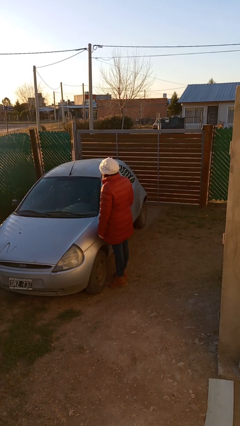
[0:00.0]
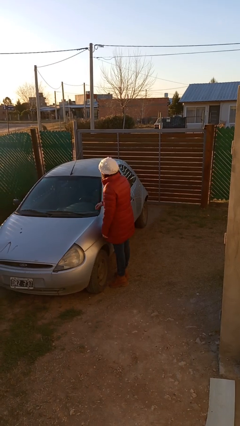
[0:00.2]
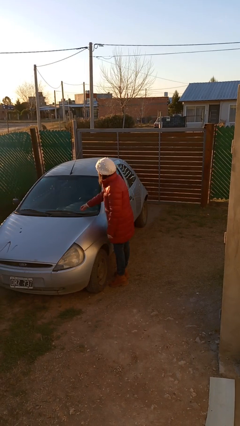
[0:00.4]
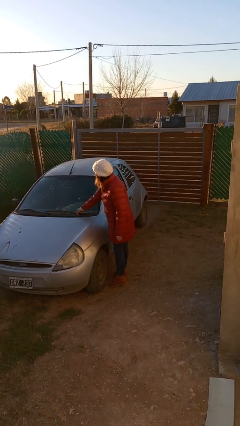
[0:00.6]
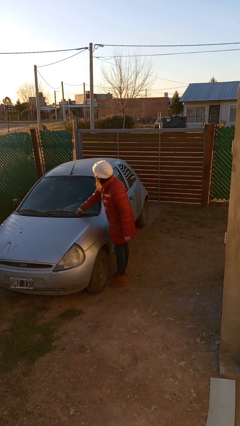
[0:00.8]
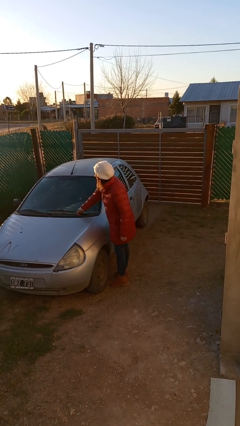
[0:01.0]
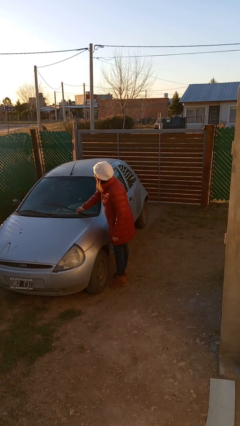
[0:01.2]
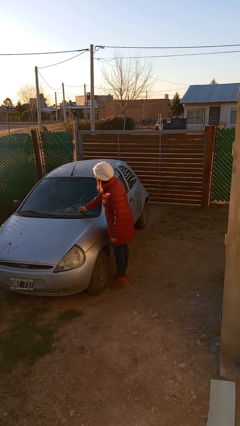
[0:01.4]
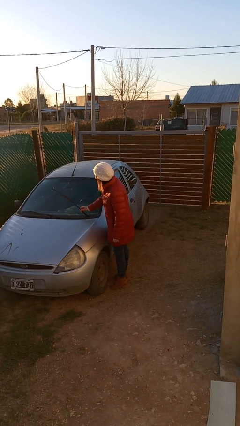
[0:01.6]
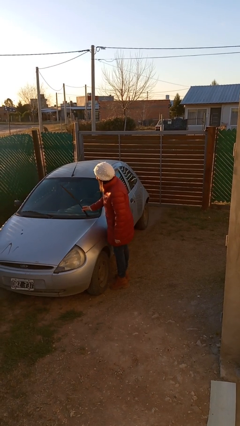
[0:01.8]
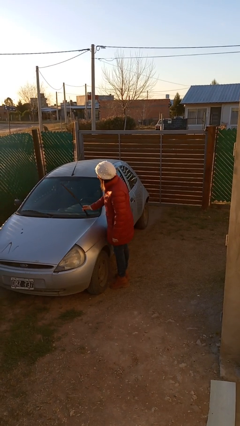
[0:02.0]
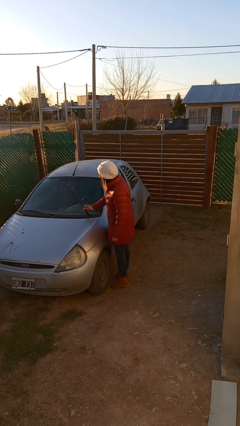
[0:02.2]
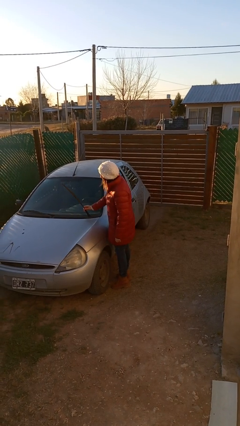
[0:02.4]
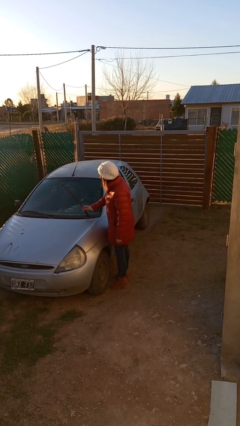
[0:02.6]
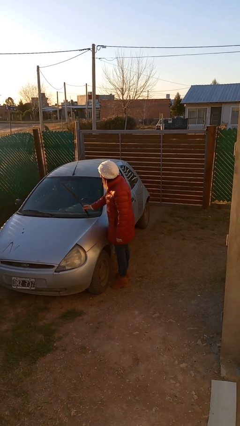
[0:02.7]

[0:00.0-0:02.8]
person flips up car wipers

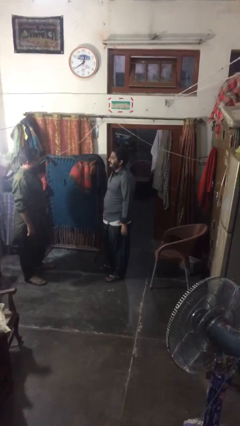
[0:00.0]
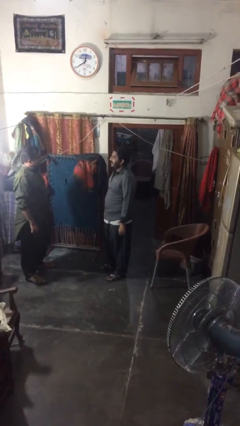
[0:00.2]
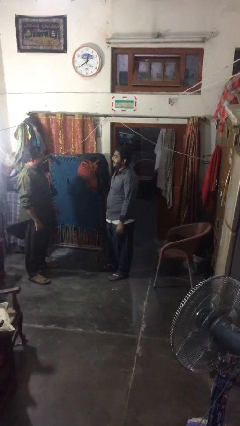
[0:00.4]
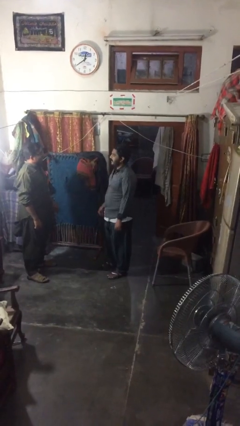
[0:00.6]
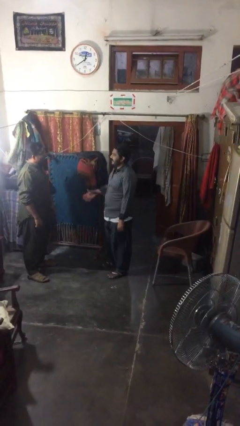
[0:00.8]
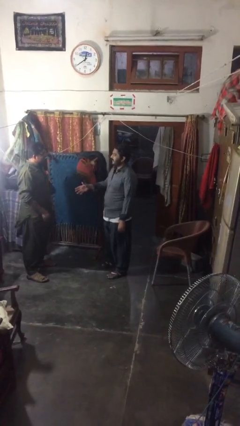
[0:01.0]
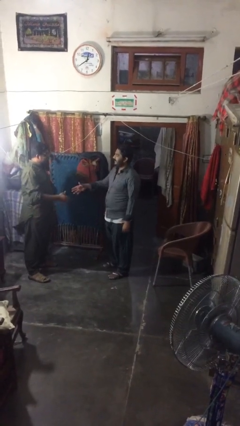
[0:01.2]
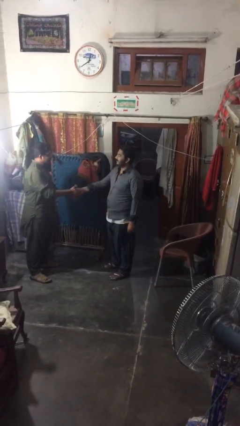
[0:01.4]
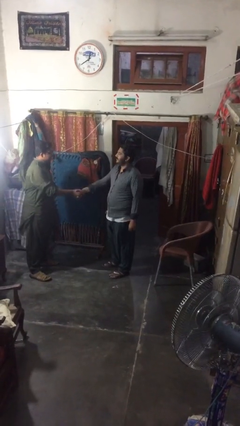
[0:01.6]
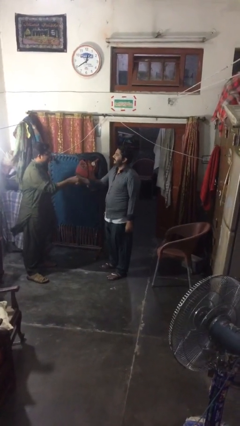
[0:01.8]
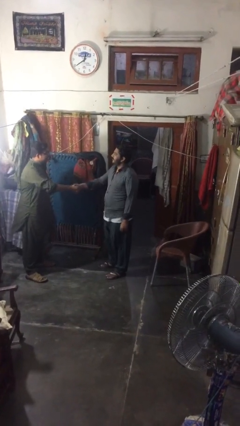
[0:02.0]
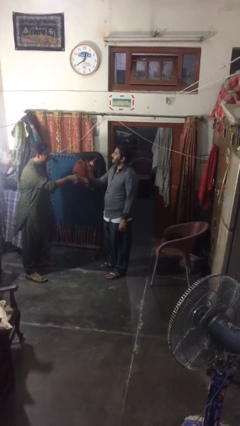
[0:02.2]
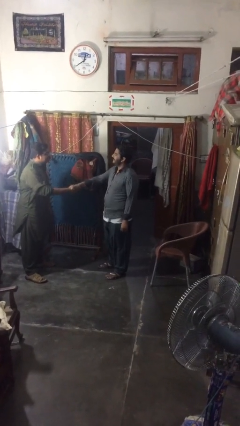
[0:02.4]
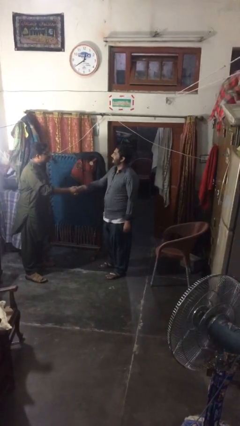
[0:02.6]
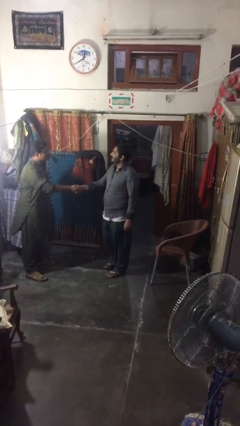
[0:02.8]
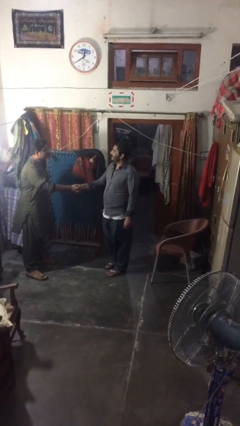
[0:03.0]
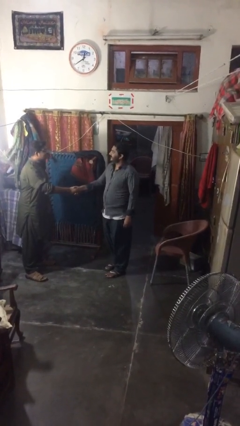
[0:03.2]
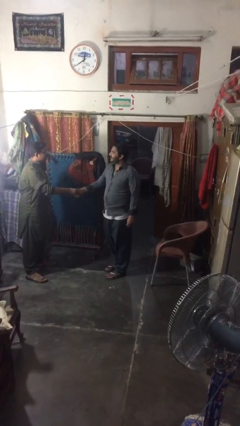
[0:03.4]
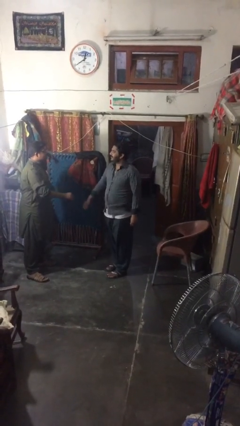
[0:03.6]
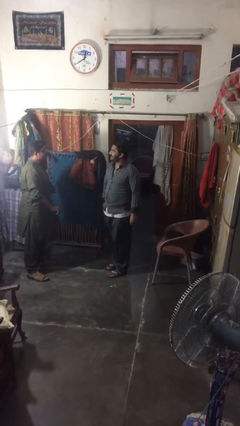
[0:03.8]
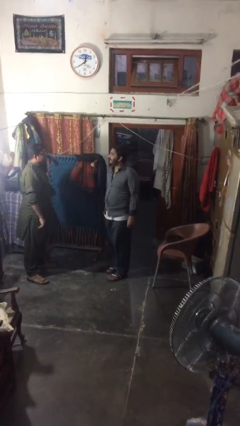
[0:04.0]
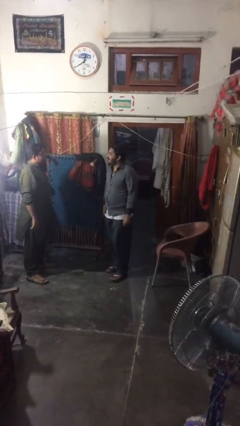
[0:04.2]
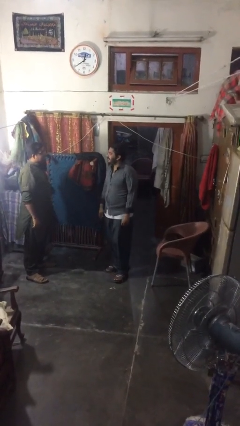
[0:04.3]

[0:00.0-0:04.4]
person shakes hand

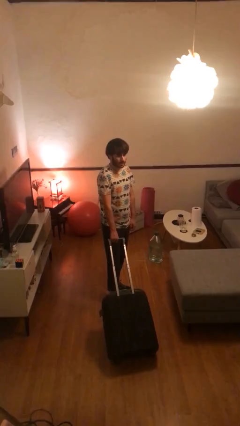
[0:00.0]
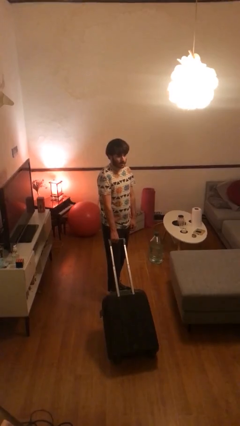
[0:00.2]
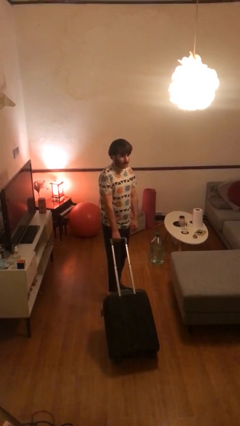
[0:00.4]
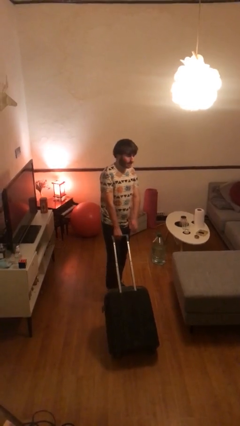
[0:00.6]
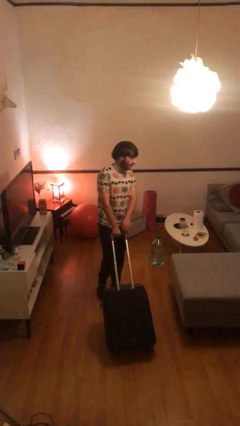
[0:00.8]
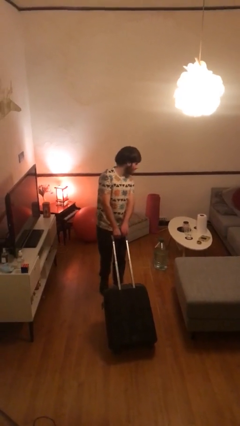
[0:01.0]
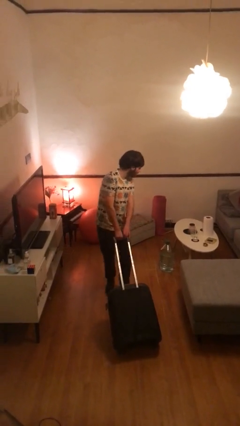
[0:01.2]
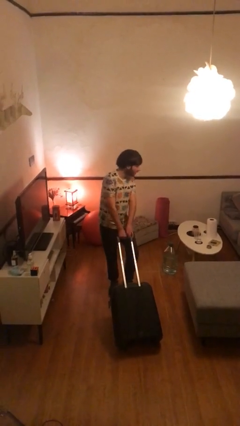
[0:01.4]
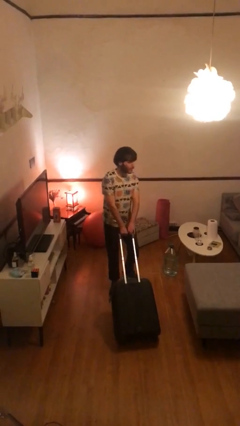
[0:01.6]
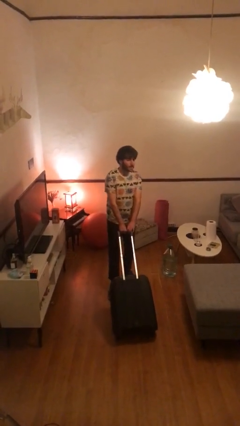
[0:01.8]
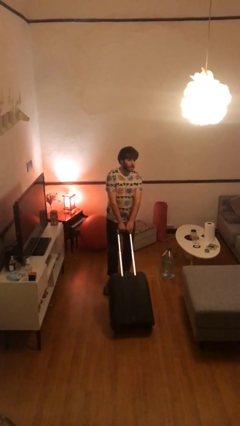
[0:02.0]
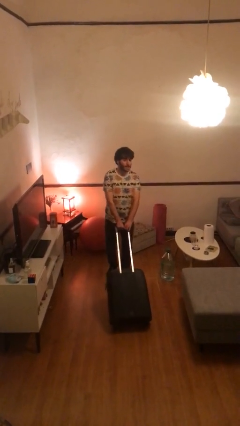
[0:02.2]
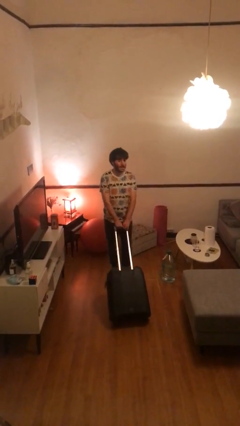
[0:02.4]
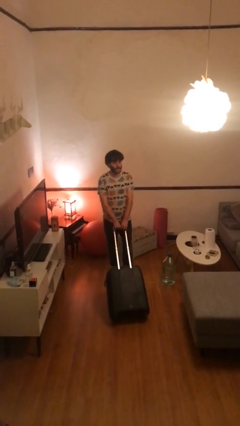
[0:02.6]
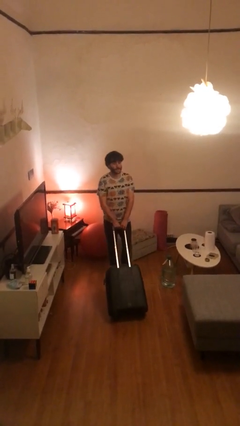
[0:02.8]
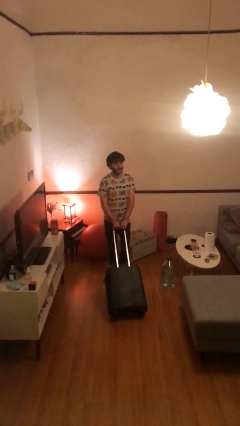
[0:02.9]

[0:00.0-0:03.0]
person pulls wheeled cart

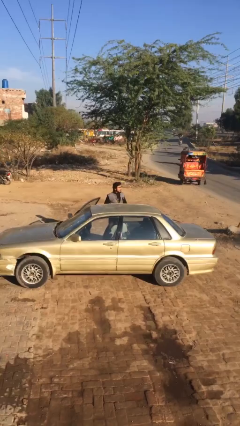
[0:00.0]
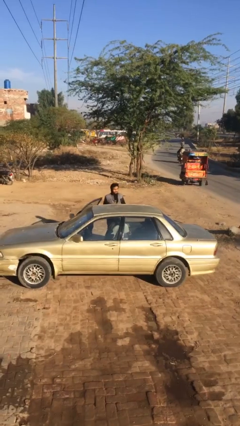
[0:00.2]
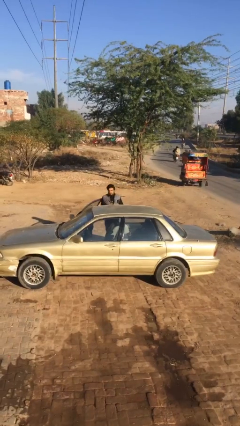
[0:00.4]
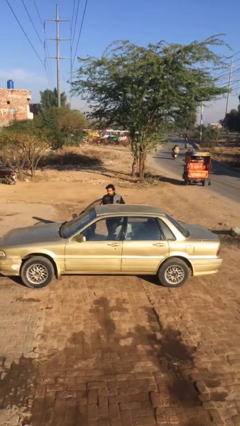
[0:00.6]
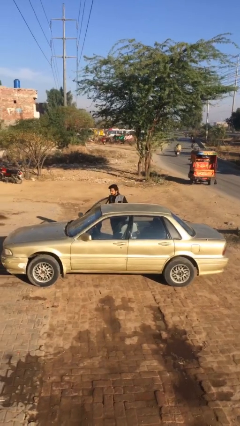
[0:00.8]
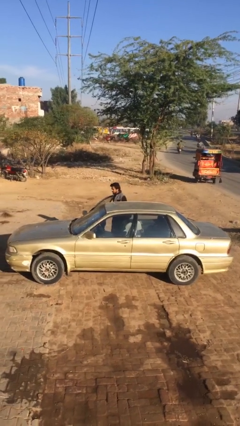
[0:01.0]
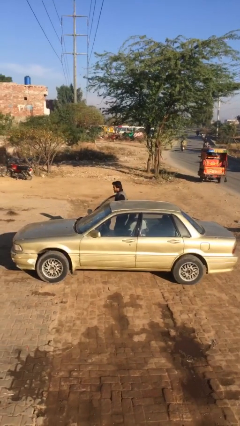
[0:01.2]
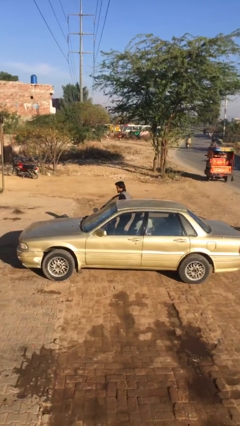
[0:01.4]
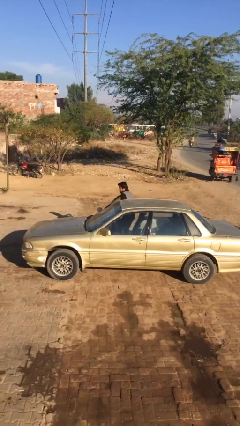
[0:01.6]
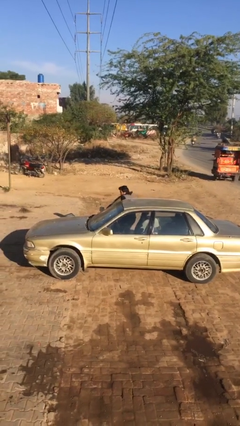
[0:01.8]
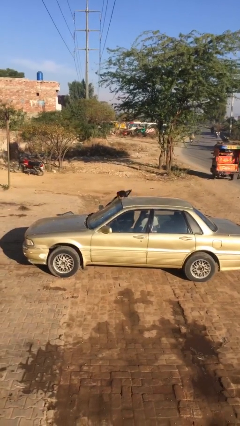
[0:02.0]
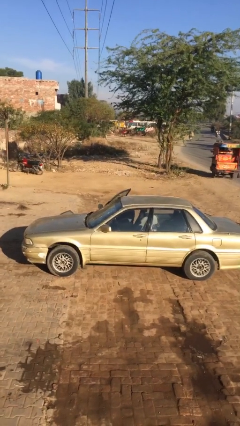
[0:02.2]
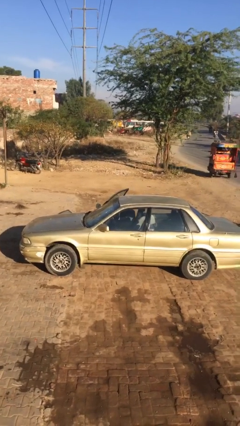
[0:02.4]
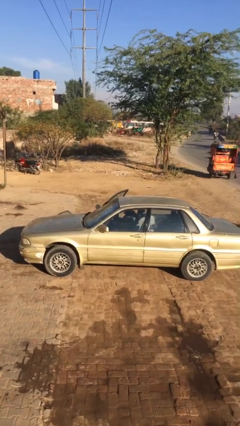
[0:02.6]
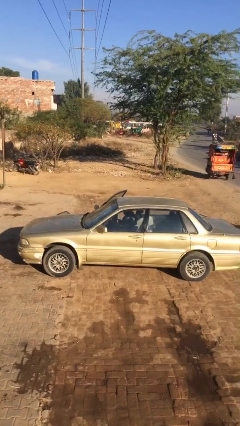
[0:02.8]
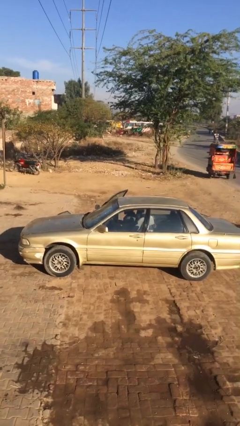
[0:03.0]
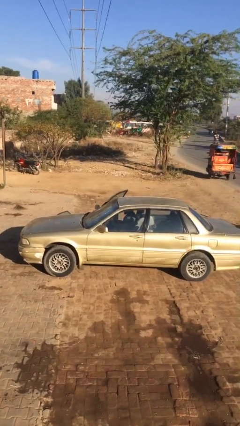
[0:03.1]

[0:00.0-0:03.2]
person enters car

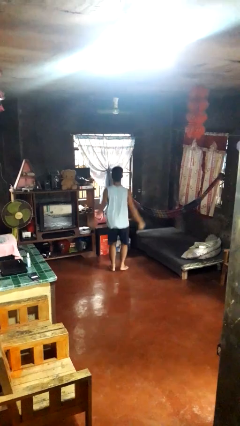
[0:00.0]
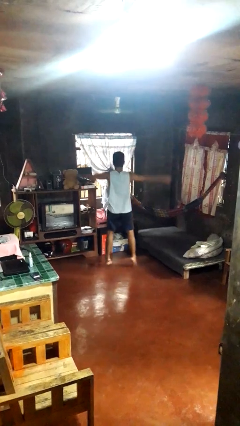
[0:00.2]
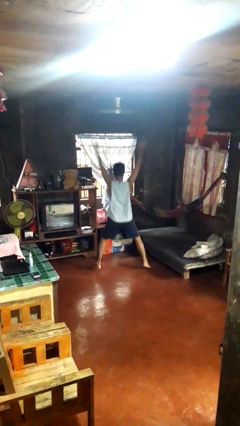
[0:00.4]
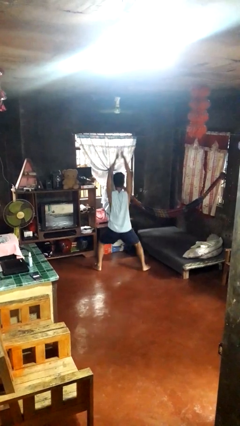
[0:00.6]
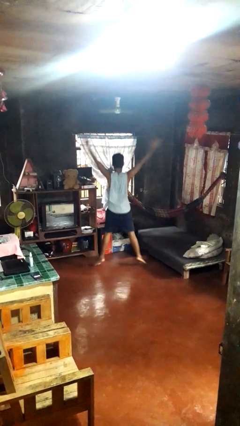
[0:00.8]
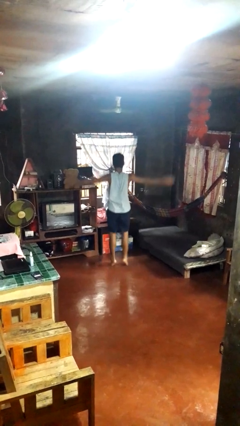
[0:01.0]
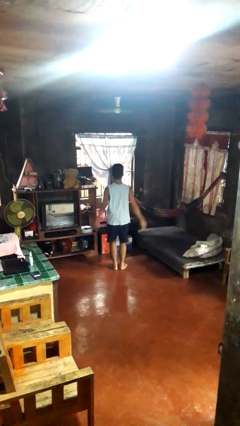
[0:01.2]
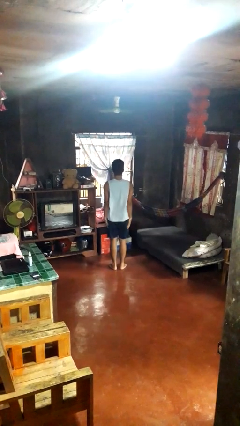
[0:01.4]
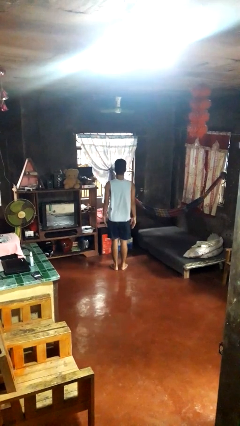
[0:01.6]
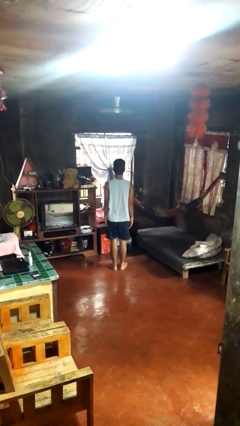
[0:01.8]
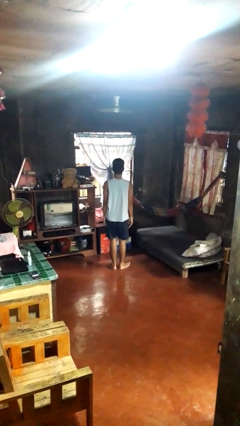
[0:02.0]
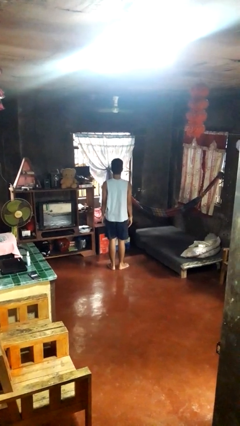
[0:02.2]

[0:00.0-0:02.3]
person exercises with jumping jacks

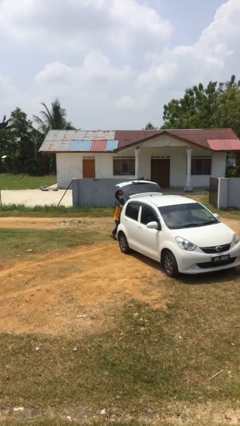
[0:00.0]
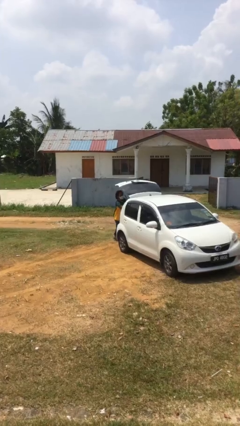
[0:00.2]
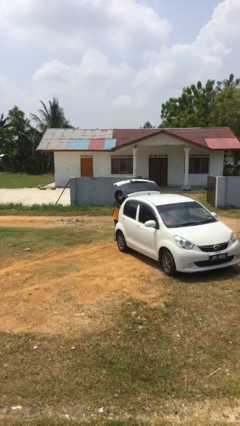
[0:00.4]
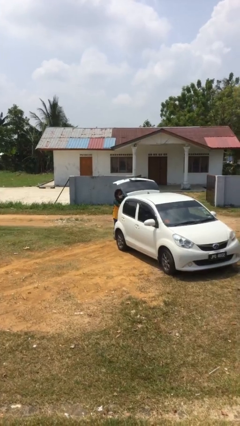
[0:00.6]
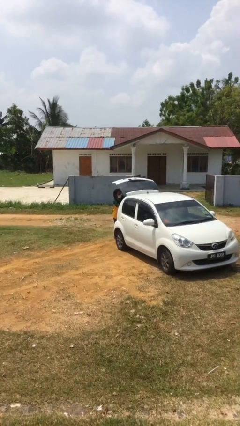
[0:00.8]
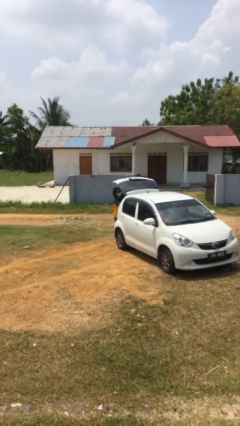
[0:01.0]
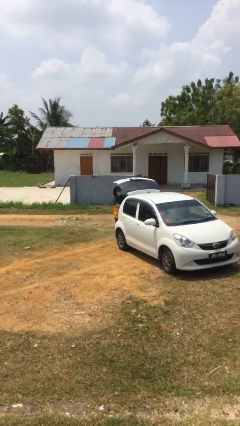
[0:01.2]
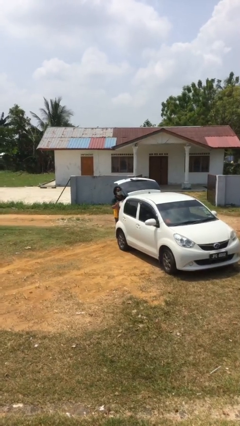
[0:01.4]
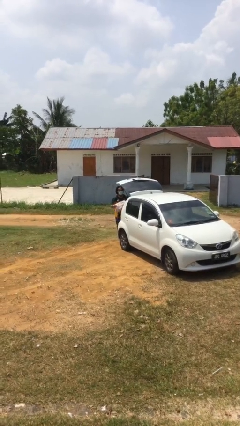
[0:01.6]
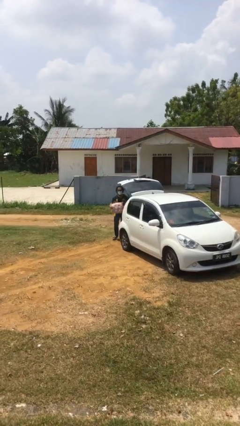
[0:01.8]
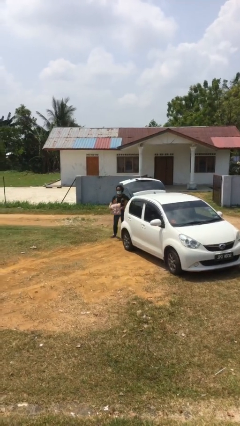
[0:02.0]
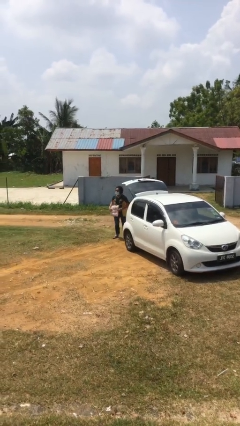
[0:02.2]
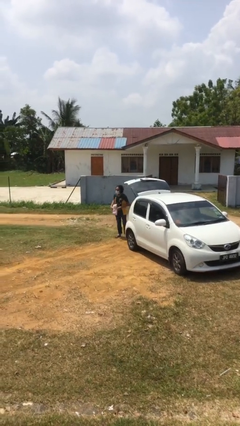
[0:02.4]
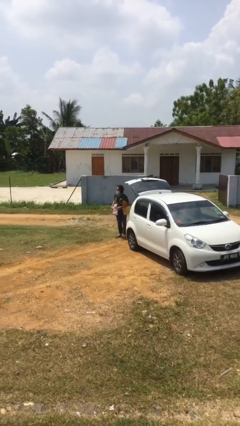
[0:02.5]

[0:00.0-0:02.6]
person unloads car
